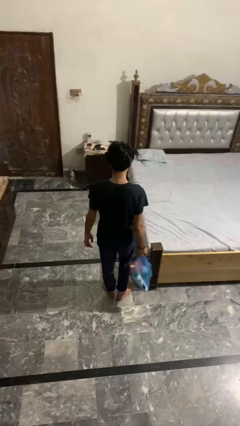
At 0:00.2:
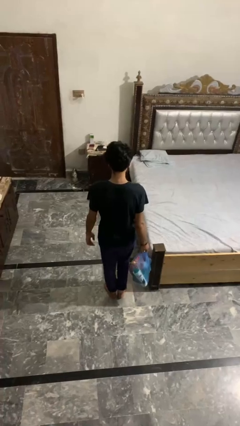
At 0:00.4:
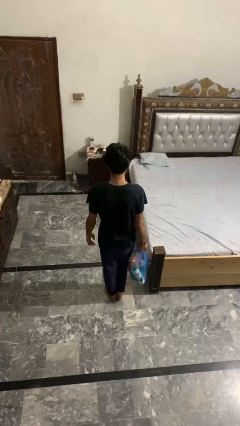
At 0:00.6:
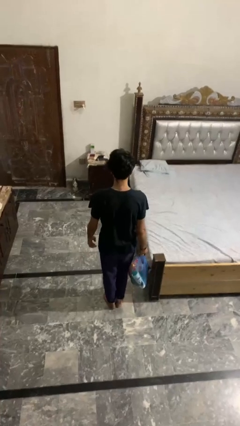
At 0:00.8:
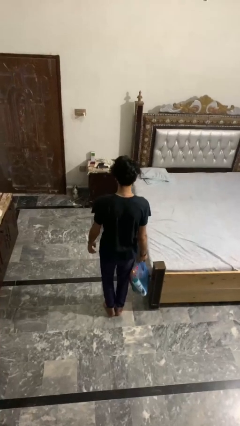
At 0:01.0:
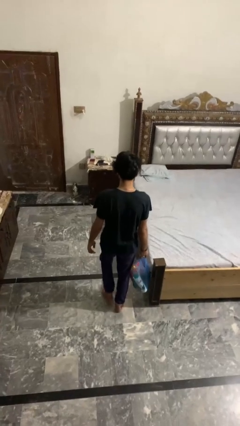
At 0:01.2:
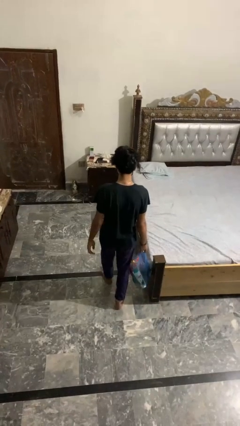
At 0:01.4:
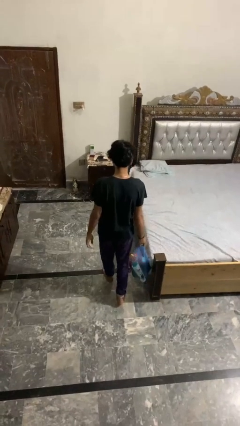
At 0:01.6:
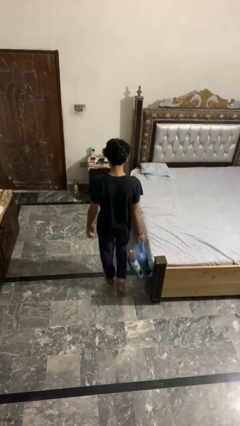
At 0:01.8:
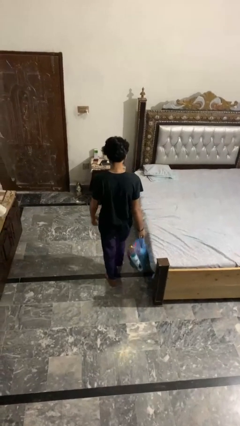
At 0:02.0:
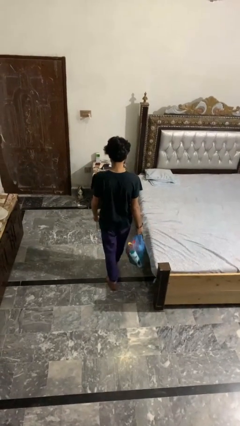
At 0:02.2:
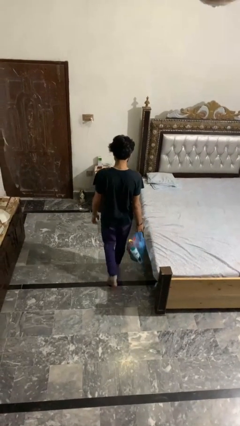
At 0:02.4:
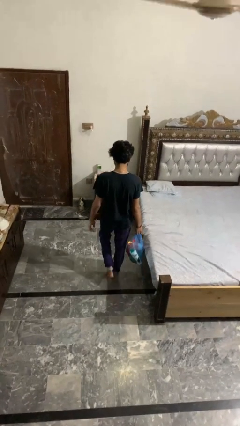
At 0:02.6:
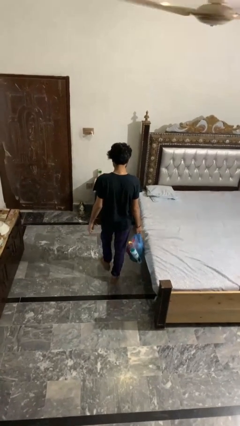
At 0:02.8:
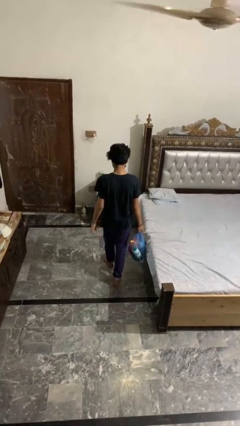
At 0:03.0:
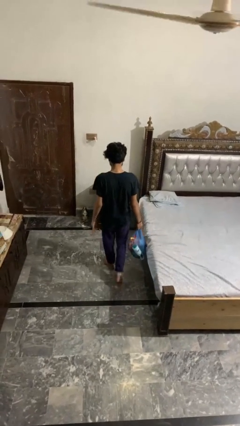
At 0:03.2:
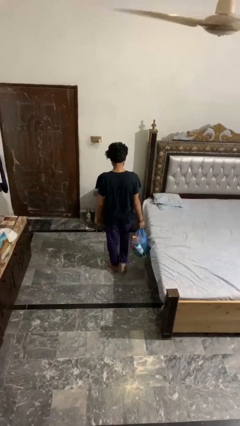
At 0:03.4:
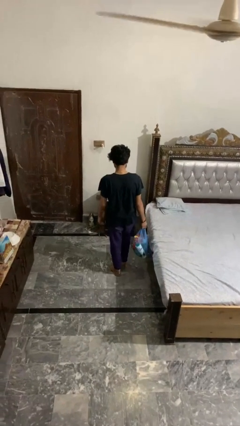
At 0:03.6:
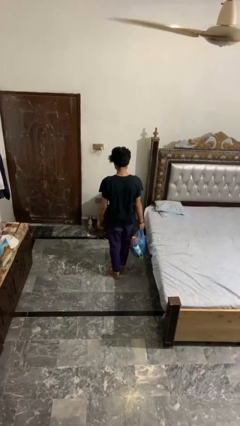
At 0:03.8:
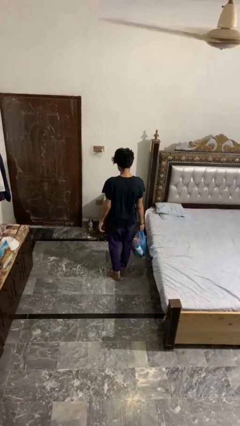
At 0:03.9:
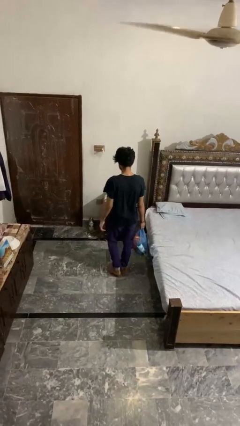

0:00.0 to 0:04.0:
person carries groceries

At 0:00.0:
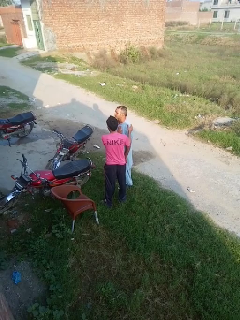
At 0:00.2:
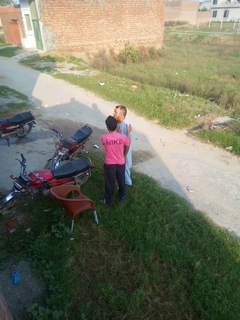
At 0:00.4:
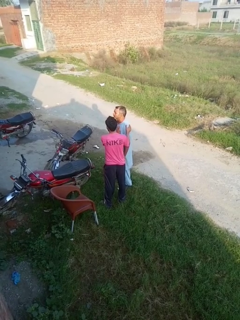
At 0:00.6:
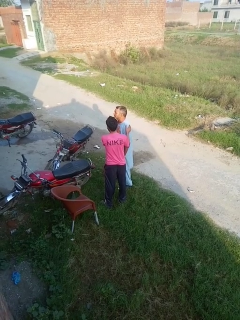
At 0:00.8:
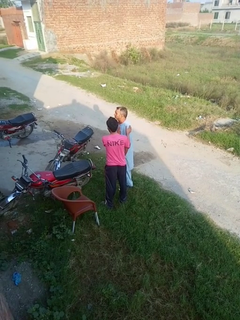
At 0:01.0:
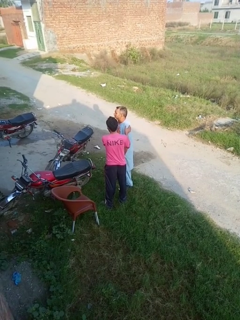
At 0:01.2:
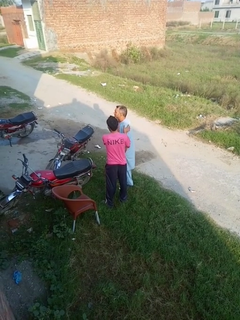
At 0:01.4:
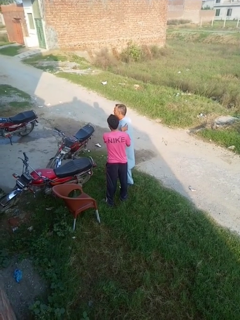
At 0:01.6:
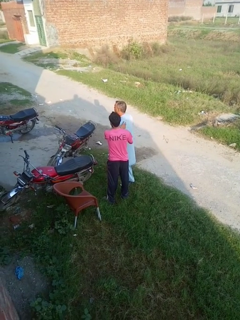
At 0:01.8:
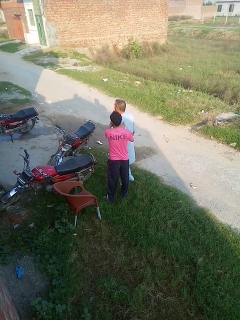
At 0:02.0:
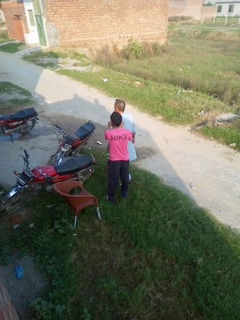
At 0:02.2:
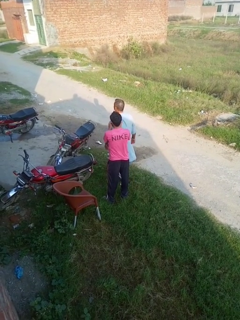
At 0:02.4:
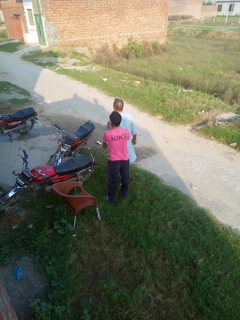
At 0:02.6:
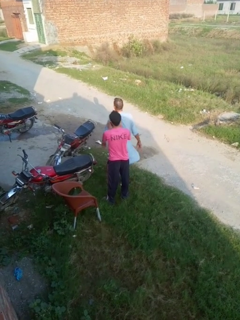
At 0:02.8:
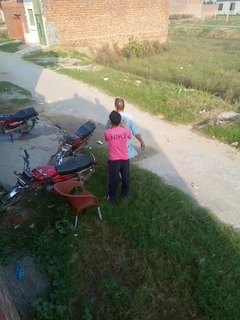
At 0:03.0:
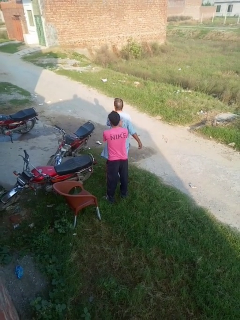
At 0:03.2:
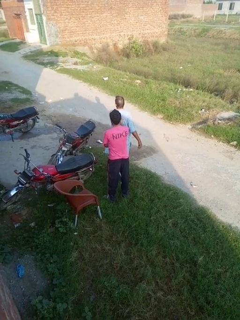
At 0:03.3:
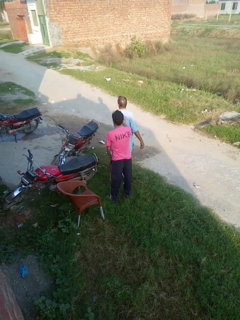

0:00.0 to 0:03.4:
person spins person around

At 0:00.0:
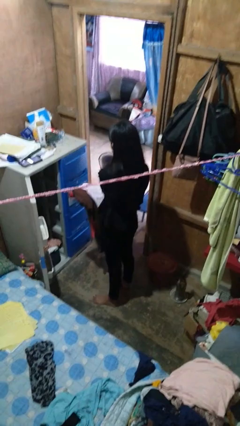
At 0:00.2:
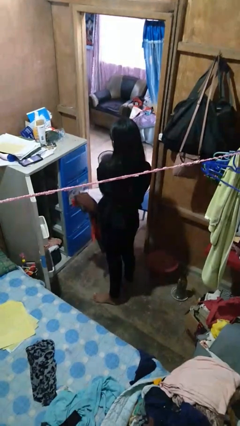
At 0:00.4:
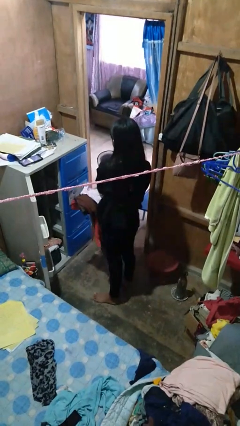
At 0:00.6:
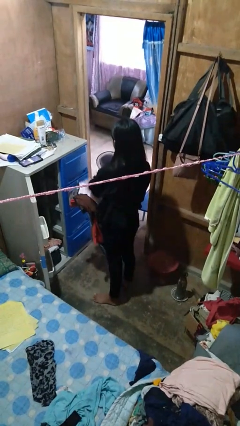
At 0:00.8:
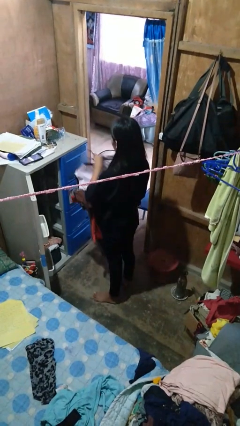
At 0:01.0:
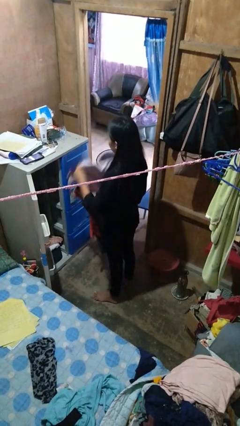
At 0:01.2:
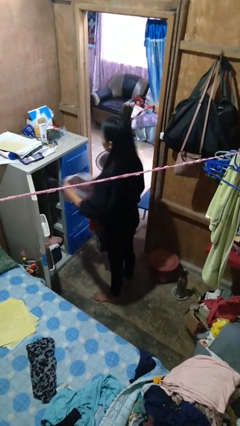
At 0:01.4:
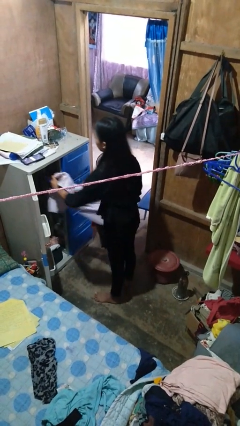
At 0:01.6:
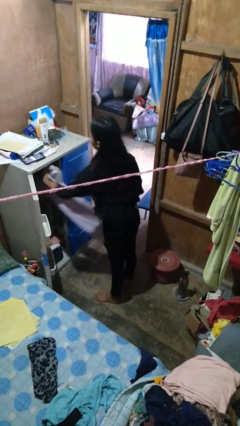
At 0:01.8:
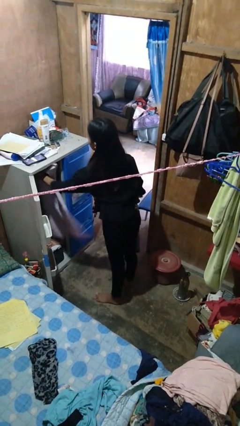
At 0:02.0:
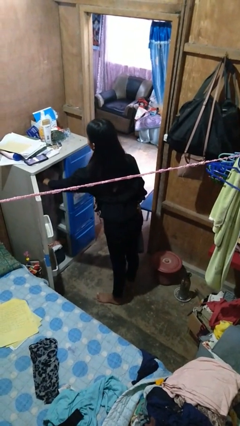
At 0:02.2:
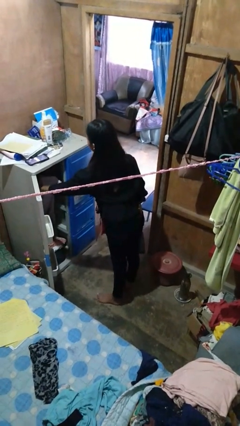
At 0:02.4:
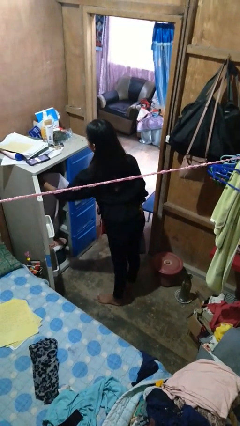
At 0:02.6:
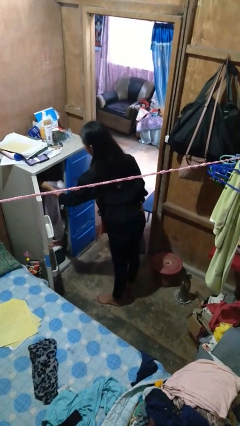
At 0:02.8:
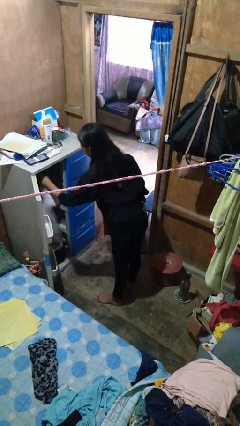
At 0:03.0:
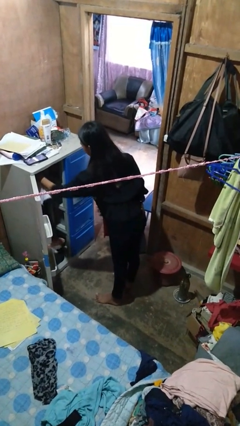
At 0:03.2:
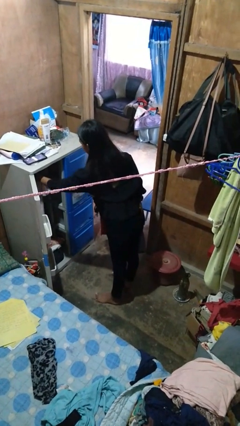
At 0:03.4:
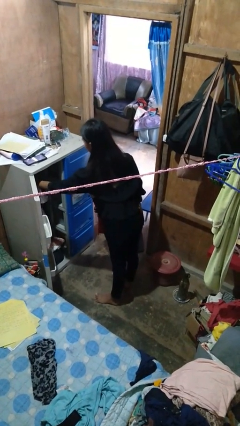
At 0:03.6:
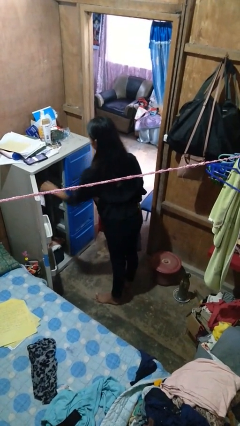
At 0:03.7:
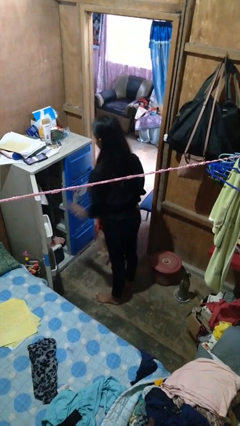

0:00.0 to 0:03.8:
person puts clothes into closet

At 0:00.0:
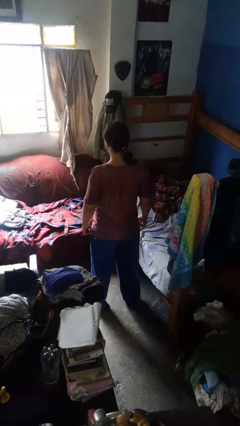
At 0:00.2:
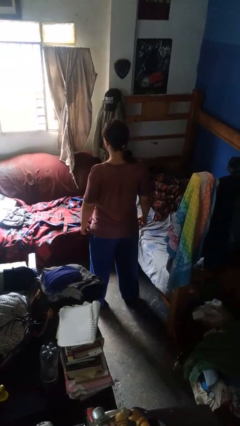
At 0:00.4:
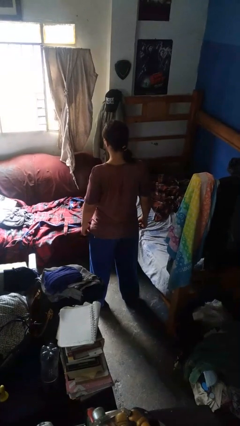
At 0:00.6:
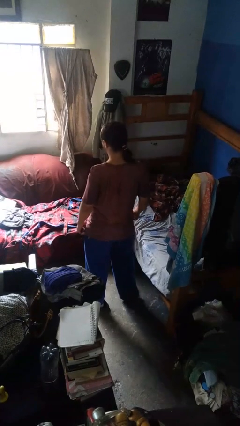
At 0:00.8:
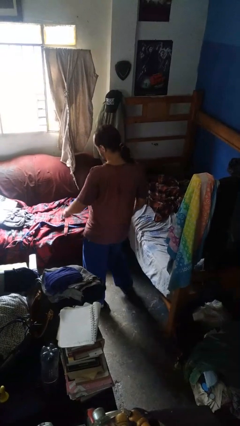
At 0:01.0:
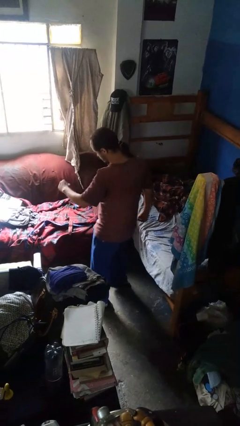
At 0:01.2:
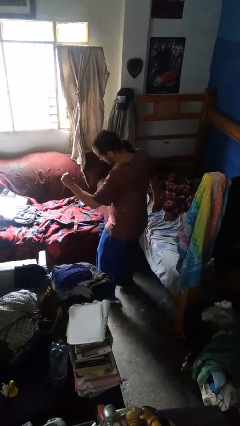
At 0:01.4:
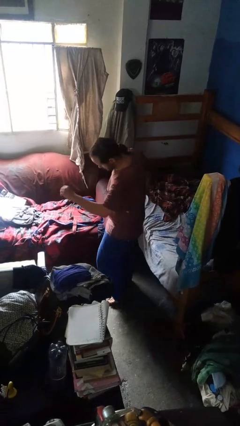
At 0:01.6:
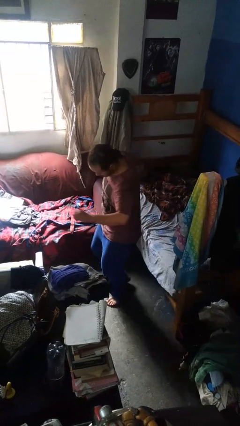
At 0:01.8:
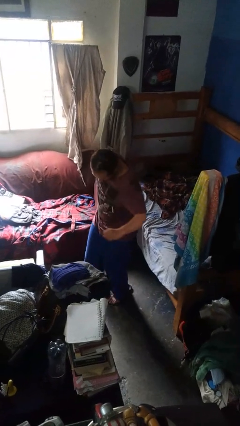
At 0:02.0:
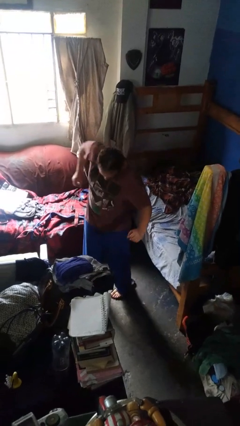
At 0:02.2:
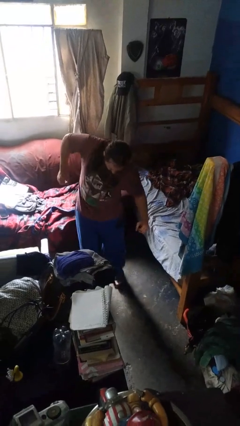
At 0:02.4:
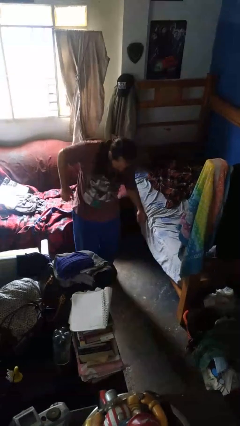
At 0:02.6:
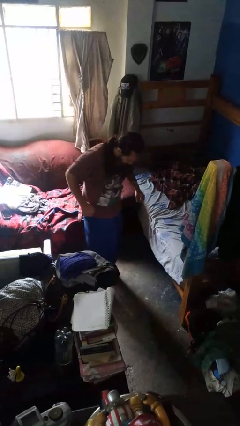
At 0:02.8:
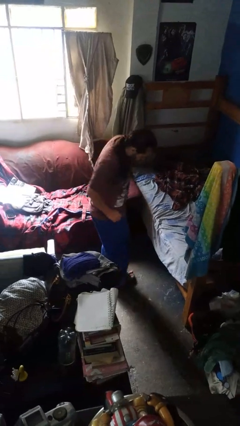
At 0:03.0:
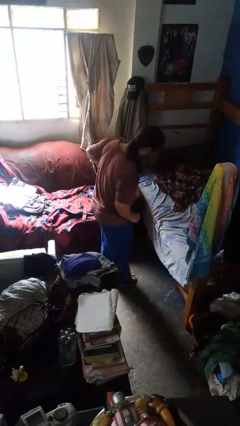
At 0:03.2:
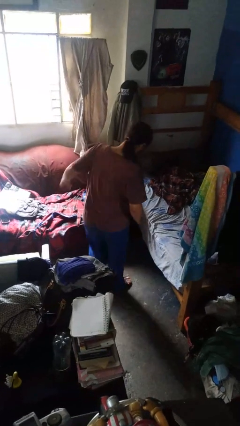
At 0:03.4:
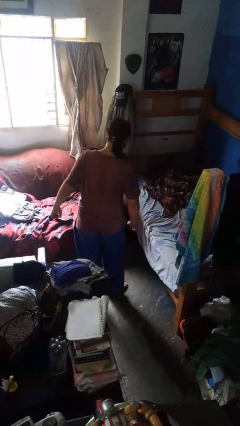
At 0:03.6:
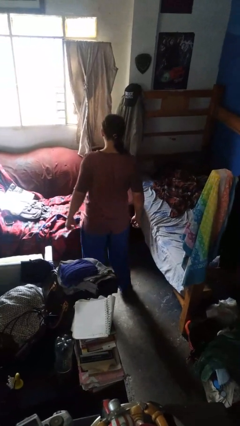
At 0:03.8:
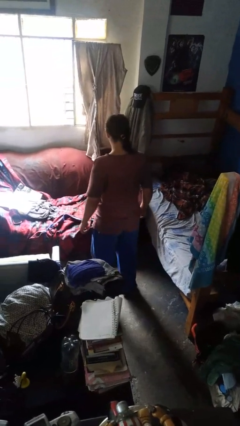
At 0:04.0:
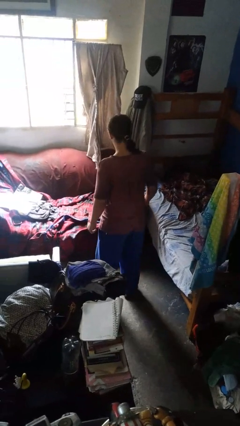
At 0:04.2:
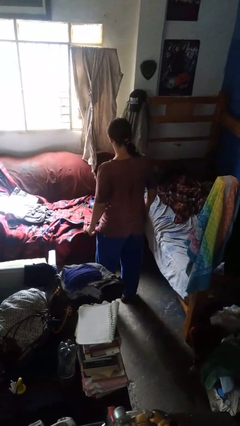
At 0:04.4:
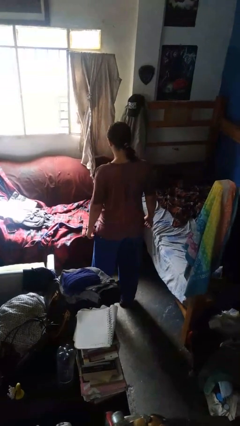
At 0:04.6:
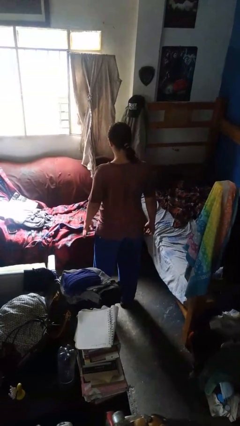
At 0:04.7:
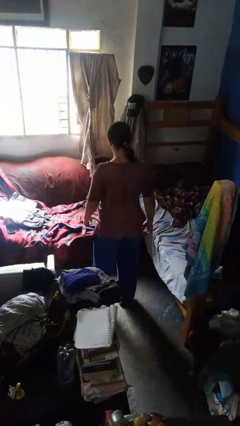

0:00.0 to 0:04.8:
person twirls

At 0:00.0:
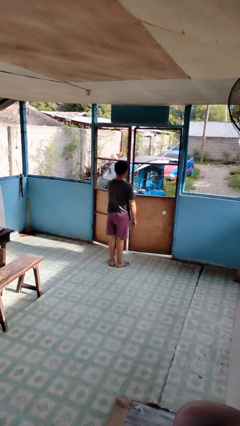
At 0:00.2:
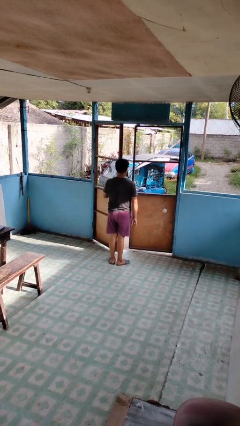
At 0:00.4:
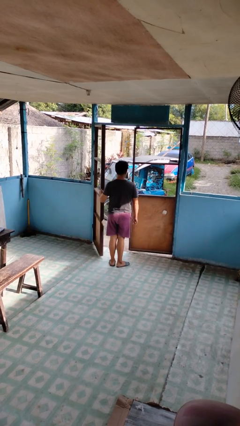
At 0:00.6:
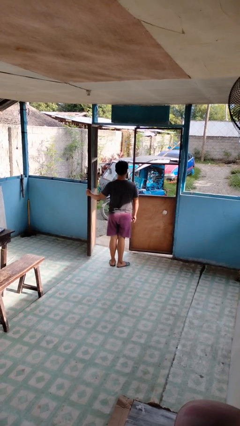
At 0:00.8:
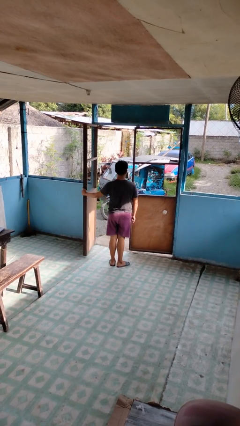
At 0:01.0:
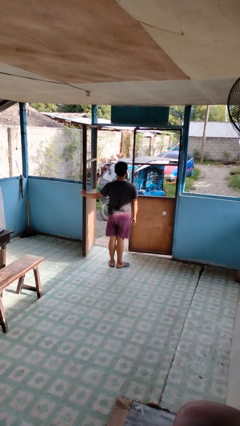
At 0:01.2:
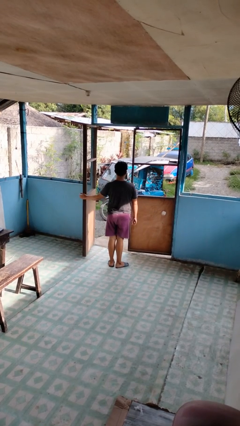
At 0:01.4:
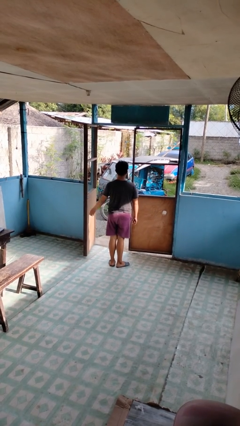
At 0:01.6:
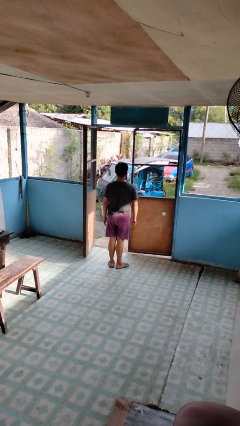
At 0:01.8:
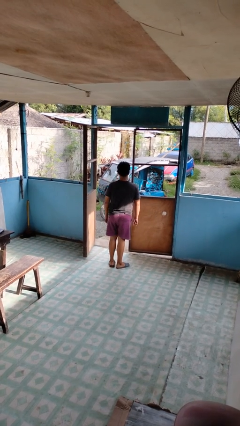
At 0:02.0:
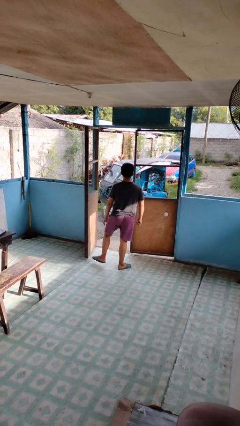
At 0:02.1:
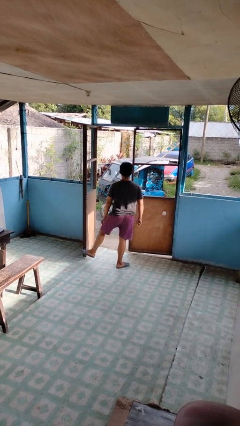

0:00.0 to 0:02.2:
person opens facility door
